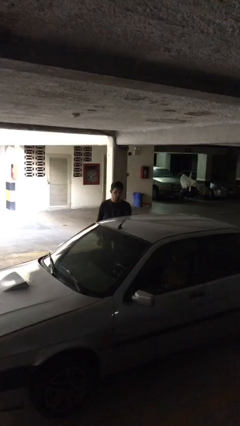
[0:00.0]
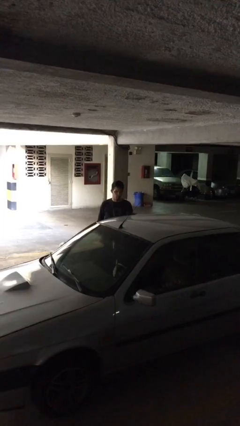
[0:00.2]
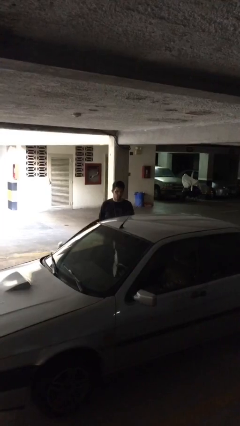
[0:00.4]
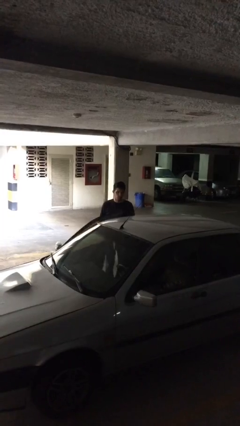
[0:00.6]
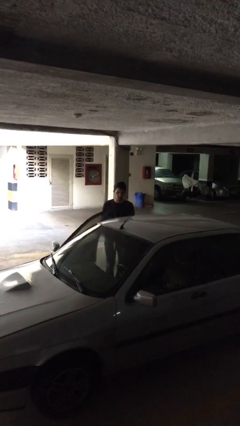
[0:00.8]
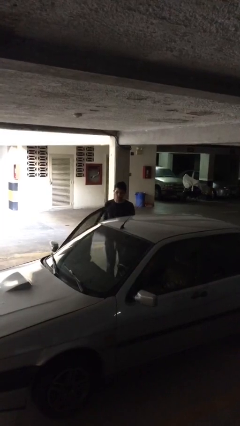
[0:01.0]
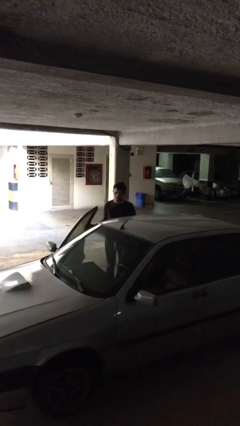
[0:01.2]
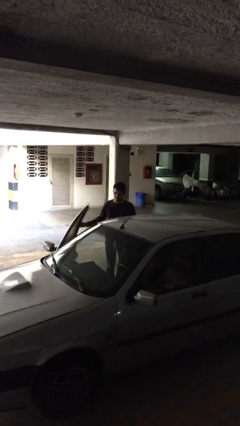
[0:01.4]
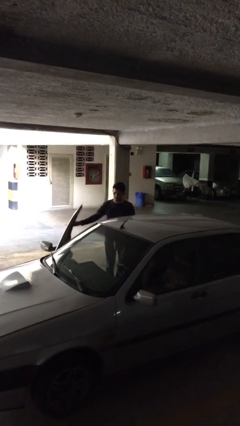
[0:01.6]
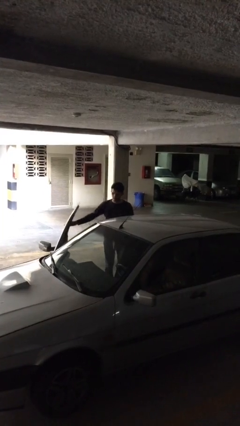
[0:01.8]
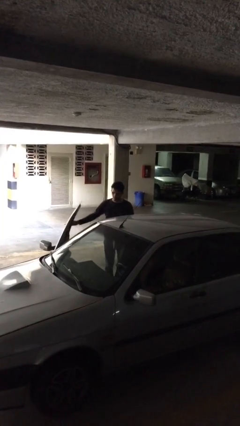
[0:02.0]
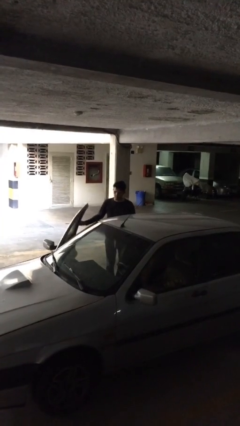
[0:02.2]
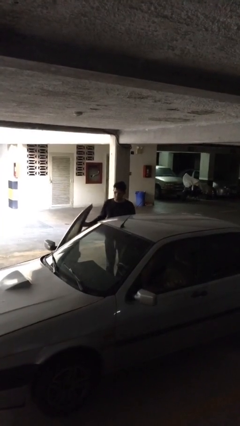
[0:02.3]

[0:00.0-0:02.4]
person opens car door

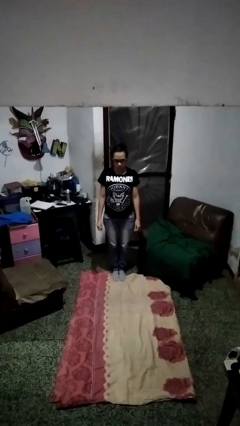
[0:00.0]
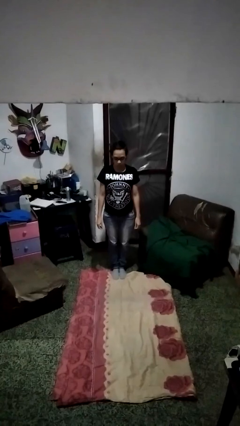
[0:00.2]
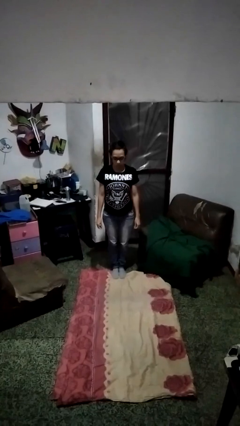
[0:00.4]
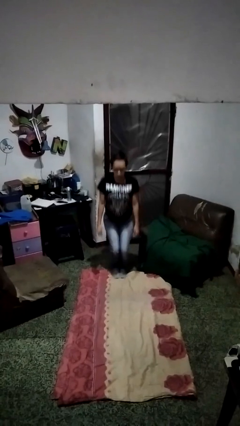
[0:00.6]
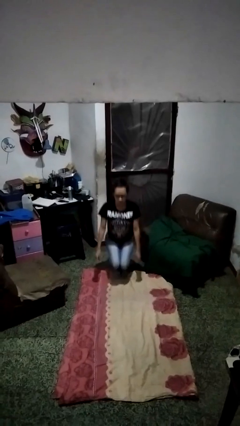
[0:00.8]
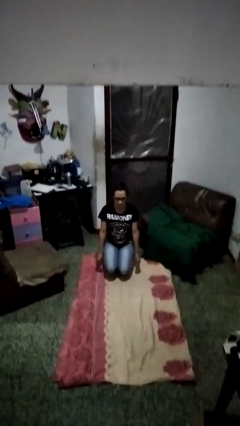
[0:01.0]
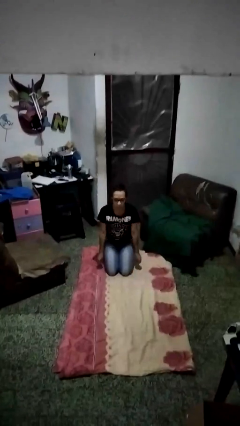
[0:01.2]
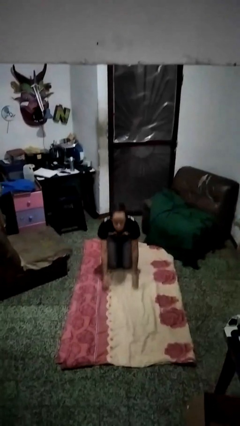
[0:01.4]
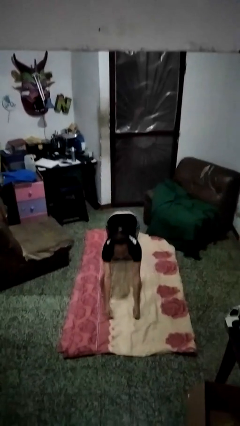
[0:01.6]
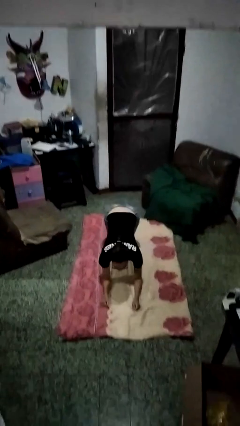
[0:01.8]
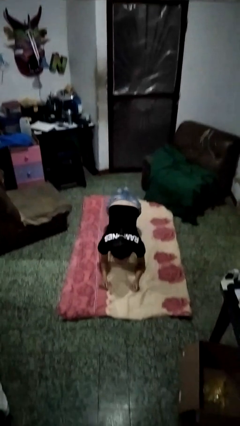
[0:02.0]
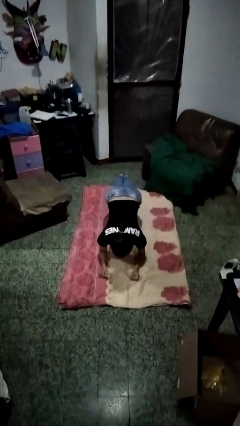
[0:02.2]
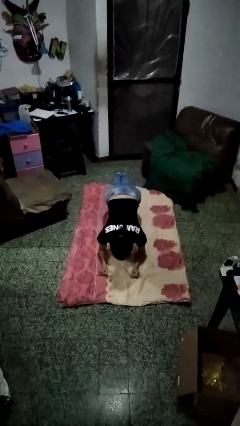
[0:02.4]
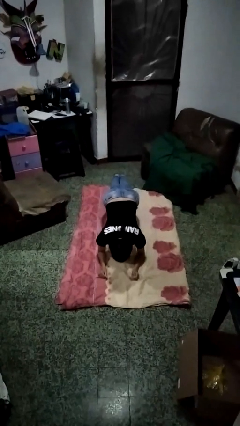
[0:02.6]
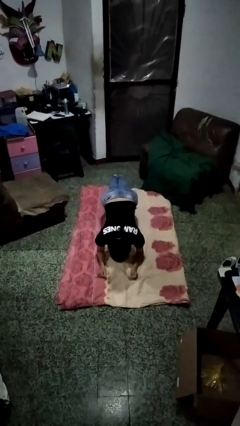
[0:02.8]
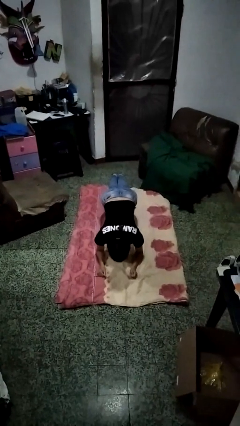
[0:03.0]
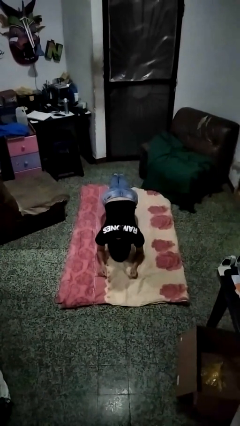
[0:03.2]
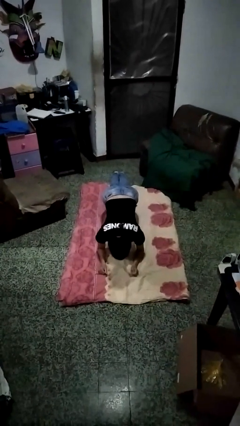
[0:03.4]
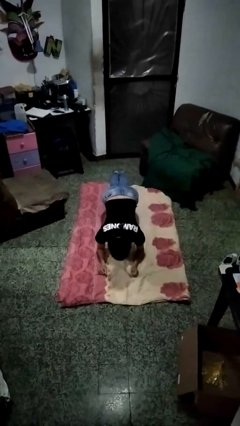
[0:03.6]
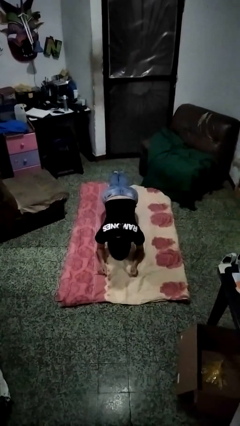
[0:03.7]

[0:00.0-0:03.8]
person exercises with plank

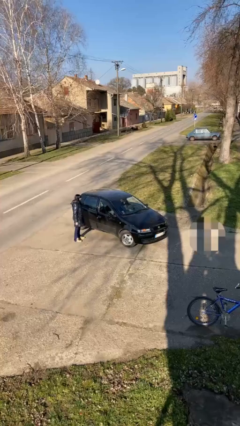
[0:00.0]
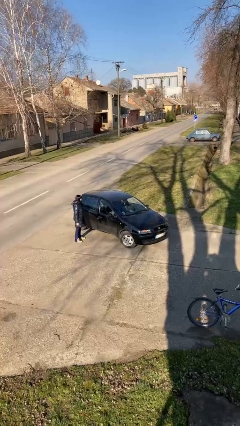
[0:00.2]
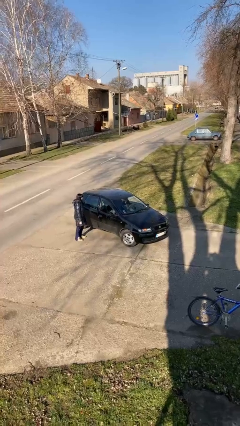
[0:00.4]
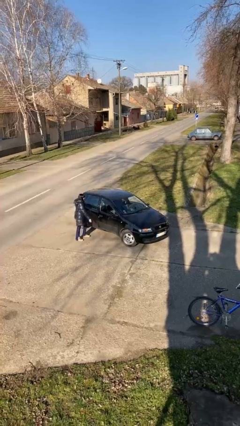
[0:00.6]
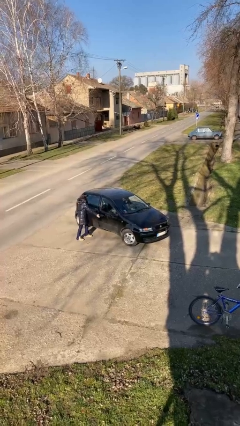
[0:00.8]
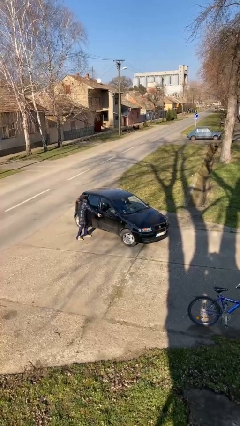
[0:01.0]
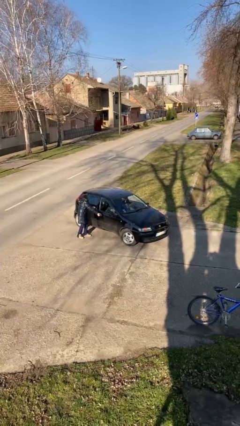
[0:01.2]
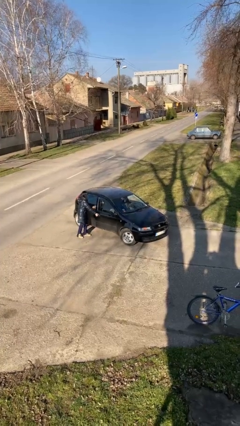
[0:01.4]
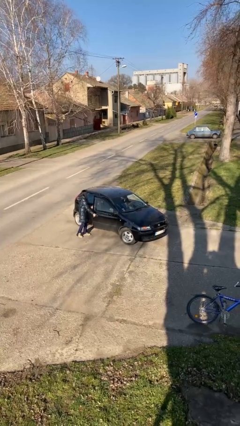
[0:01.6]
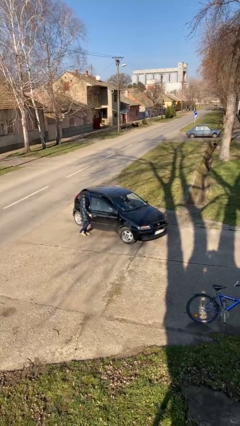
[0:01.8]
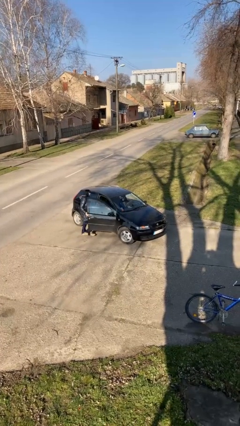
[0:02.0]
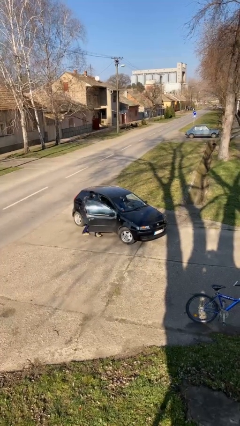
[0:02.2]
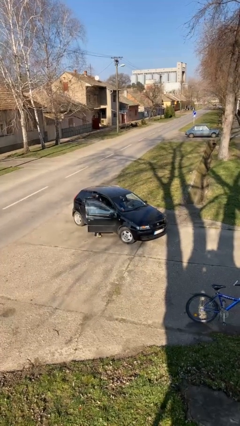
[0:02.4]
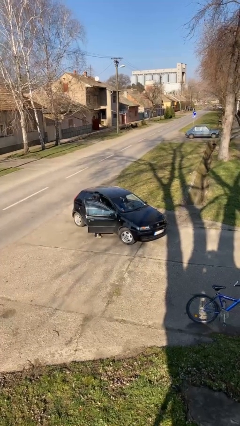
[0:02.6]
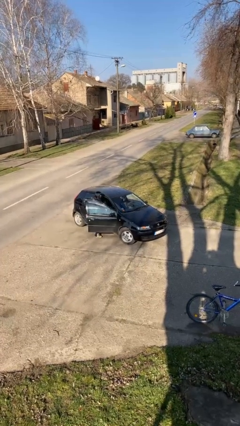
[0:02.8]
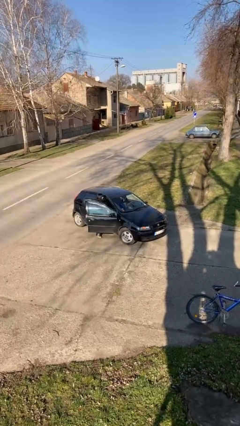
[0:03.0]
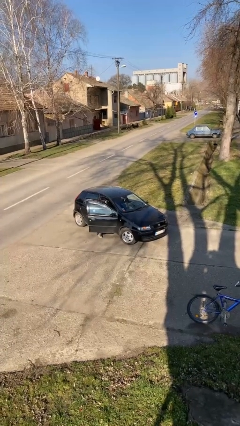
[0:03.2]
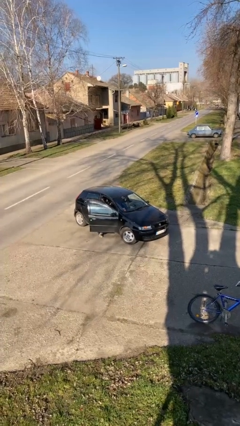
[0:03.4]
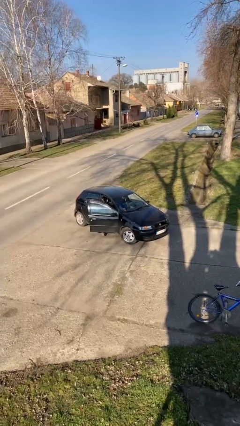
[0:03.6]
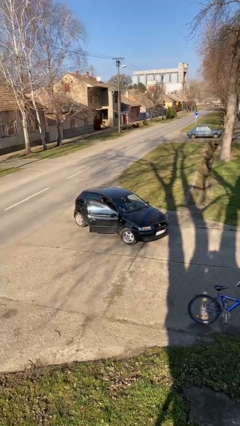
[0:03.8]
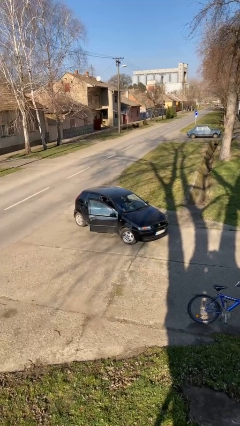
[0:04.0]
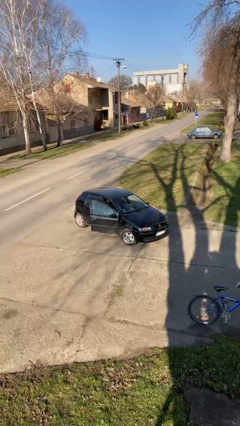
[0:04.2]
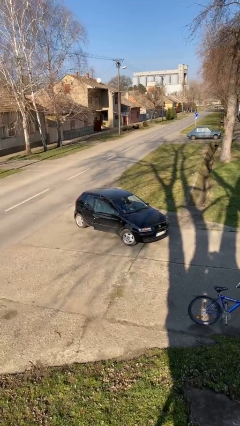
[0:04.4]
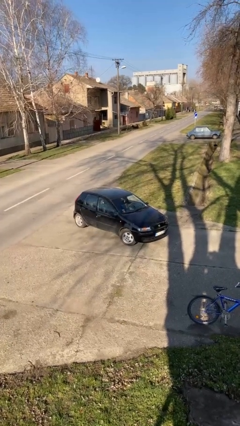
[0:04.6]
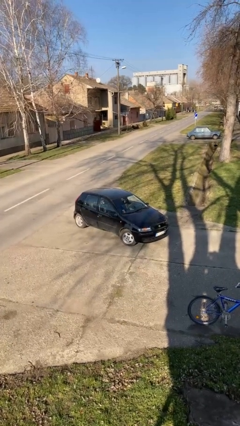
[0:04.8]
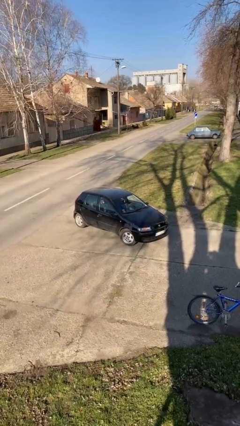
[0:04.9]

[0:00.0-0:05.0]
car picks up person

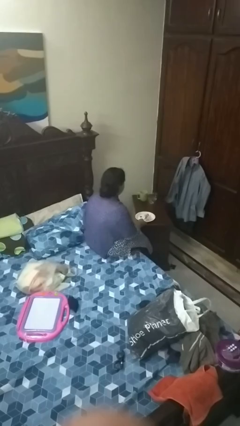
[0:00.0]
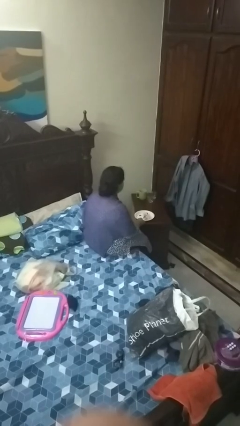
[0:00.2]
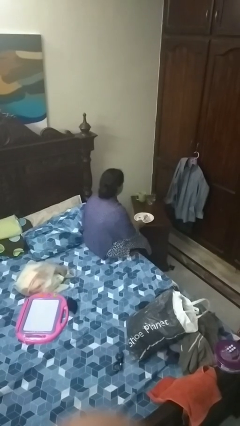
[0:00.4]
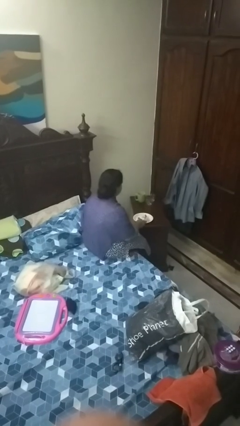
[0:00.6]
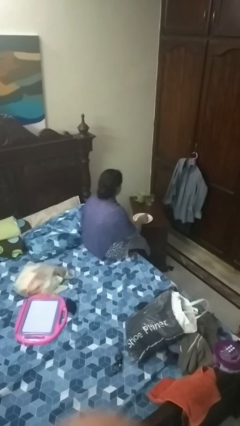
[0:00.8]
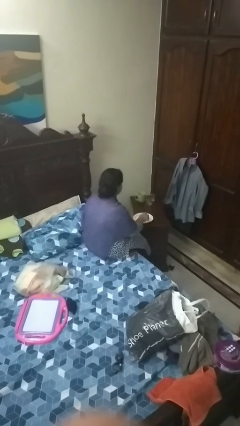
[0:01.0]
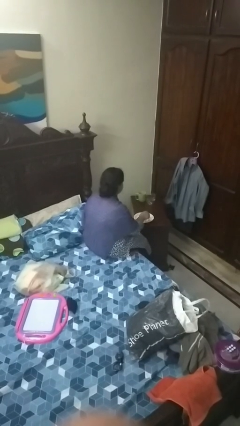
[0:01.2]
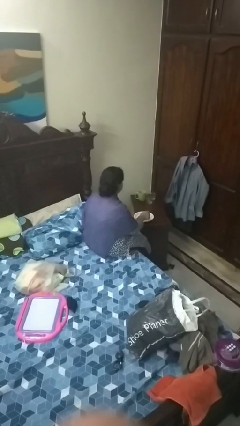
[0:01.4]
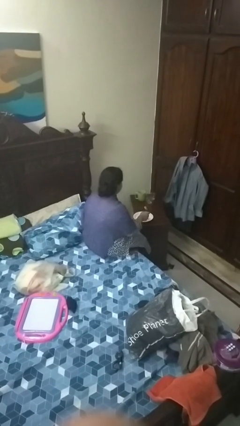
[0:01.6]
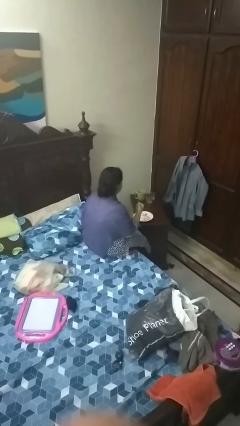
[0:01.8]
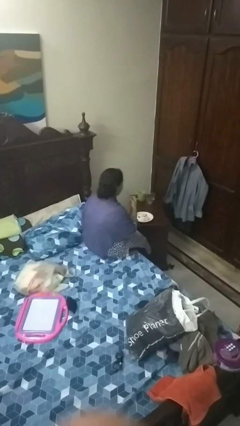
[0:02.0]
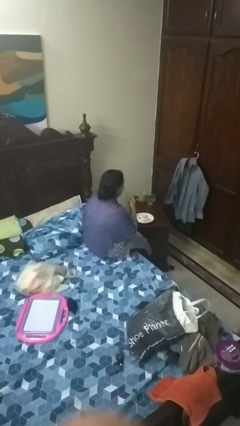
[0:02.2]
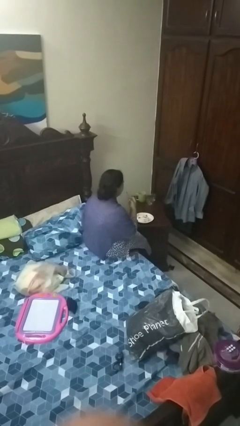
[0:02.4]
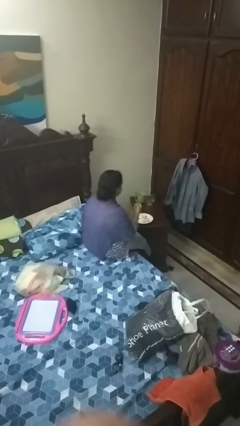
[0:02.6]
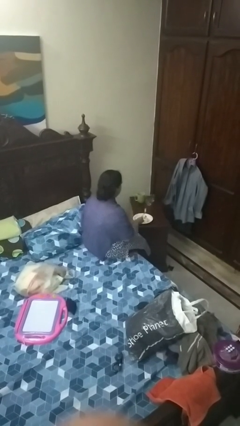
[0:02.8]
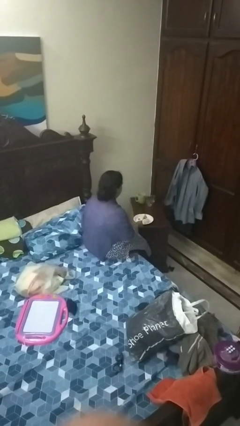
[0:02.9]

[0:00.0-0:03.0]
person eats with utensil

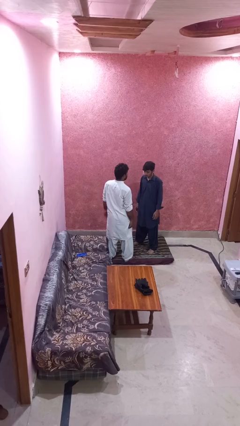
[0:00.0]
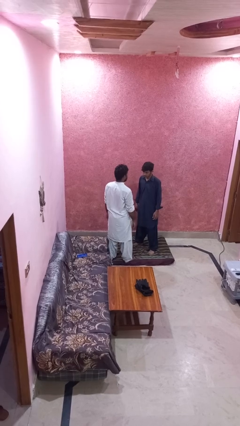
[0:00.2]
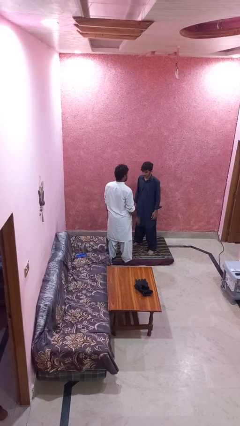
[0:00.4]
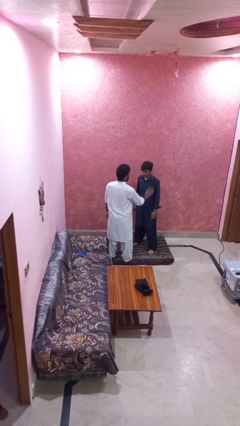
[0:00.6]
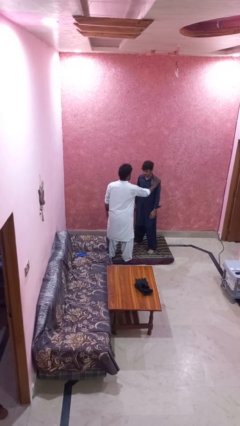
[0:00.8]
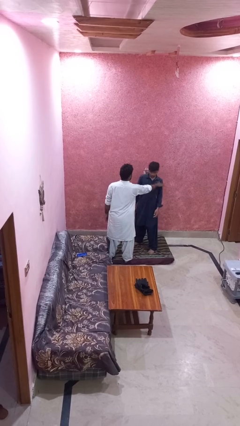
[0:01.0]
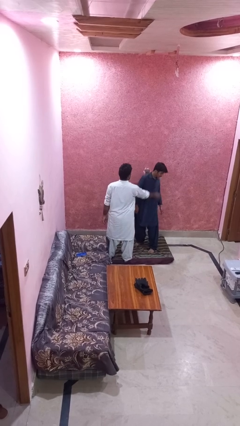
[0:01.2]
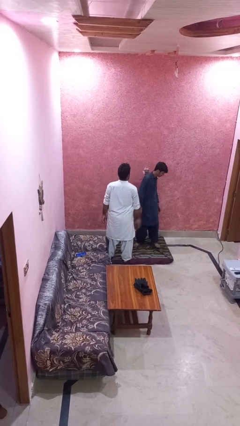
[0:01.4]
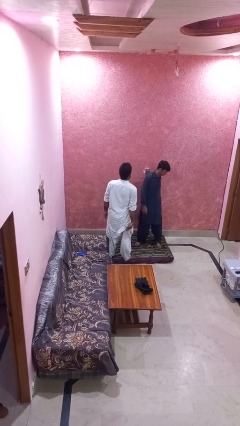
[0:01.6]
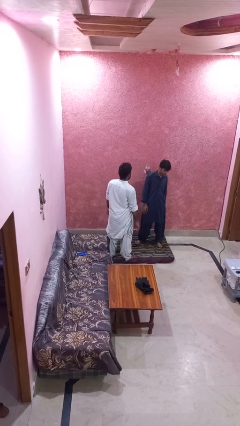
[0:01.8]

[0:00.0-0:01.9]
person shoves person

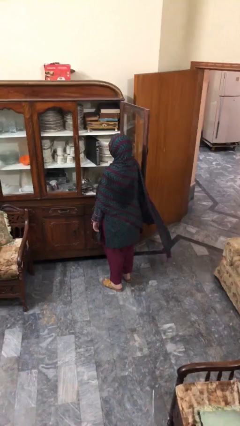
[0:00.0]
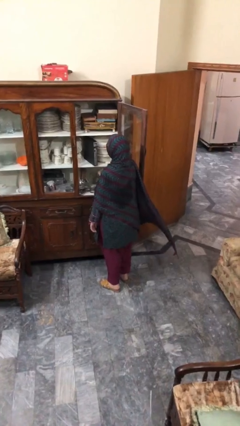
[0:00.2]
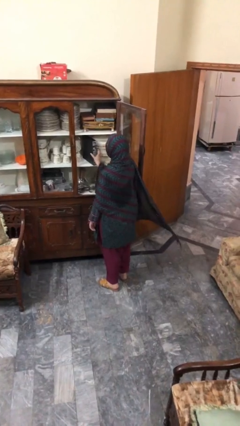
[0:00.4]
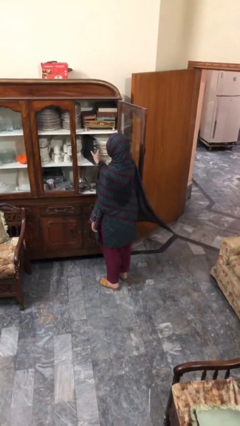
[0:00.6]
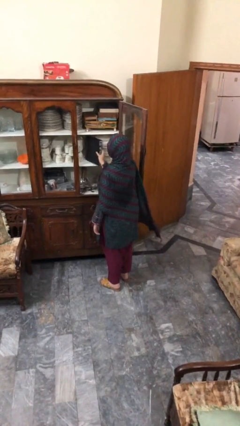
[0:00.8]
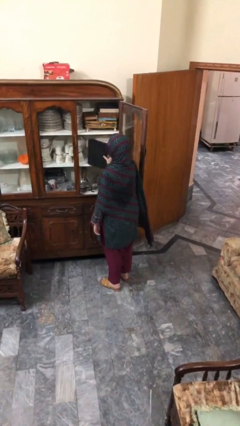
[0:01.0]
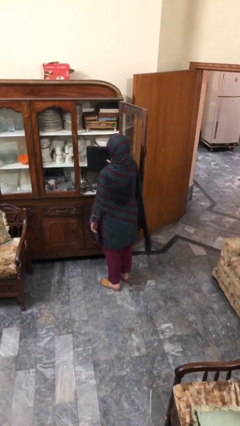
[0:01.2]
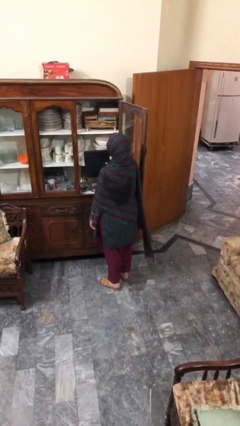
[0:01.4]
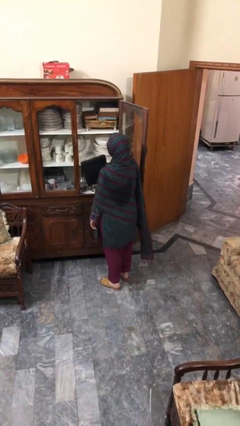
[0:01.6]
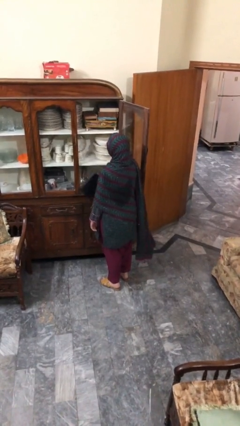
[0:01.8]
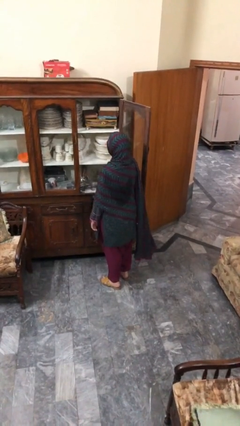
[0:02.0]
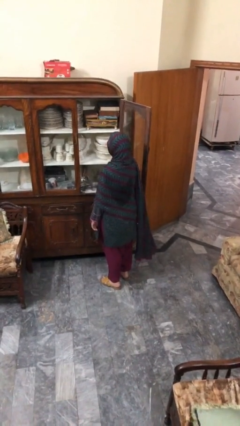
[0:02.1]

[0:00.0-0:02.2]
person picks up object from countertop
